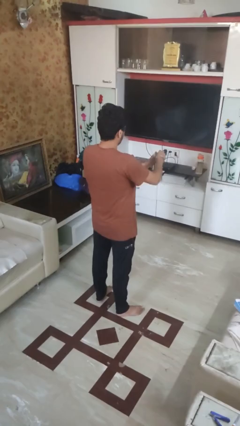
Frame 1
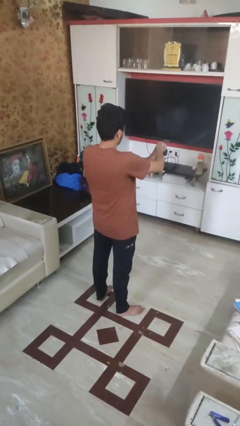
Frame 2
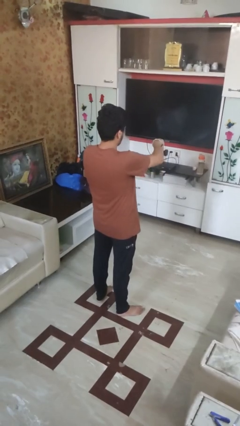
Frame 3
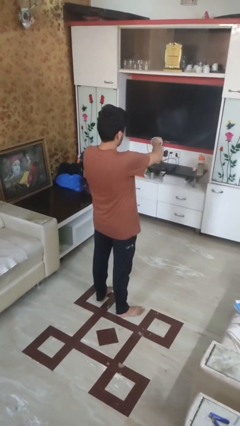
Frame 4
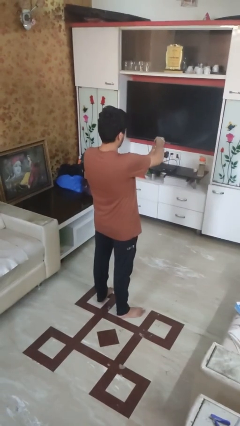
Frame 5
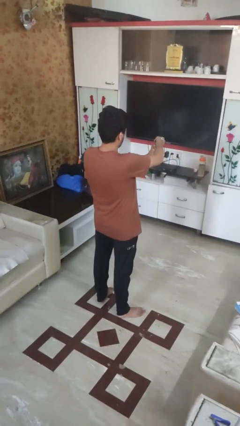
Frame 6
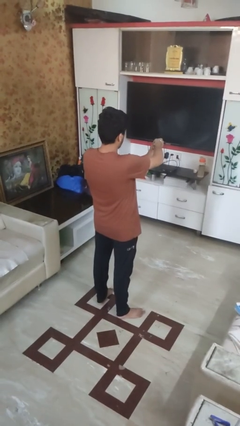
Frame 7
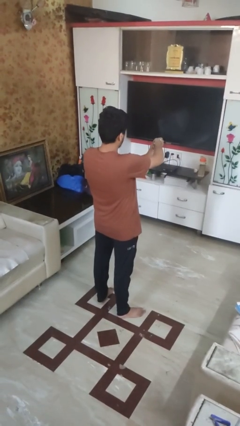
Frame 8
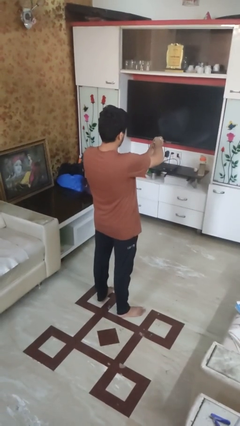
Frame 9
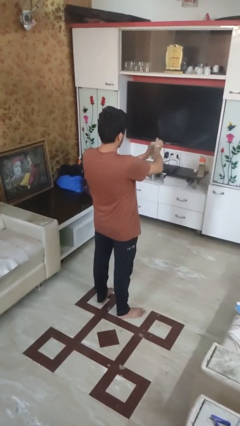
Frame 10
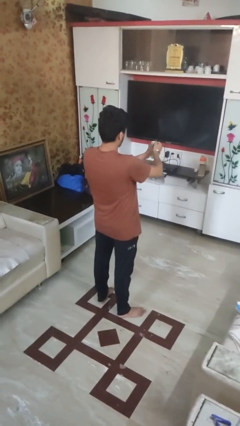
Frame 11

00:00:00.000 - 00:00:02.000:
person opens beverage can

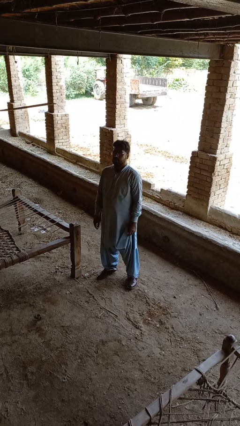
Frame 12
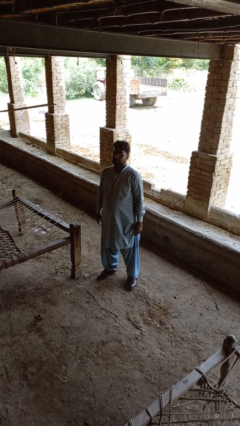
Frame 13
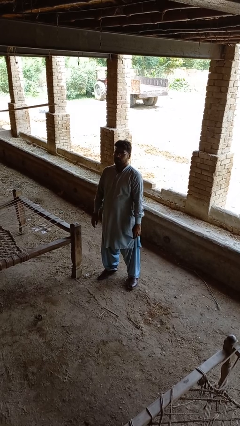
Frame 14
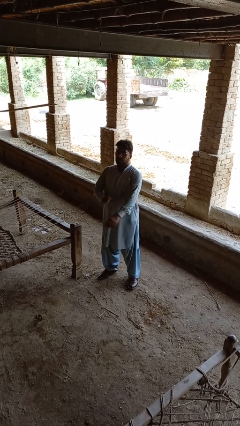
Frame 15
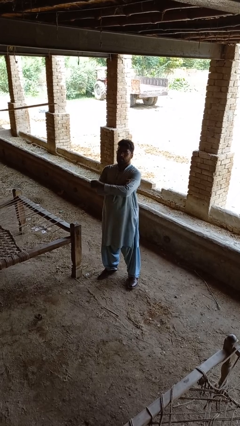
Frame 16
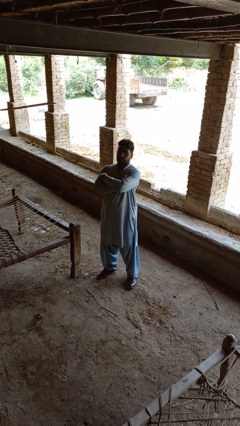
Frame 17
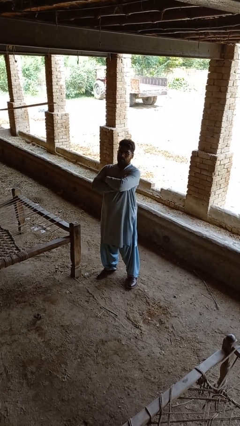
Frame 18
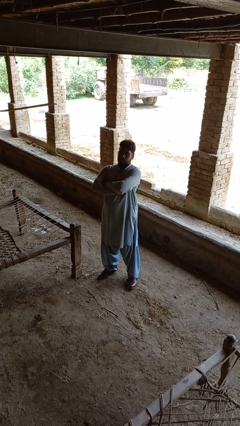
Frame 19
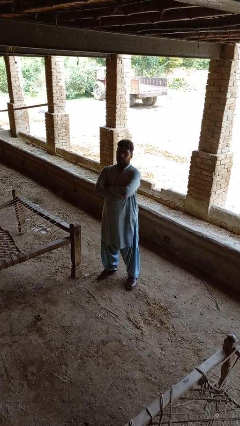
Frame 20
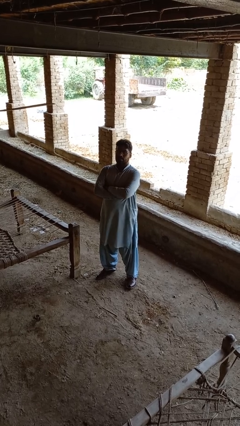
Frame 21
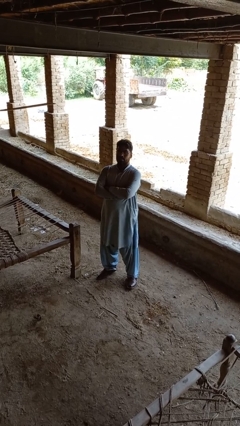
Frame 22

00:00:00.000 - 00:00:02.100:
person crosses arms

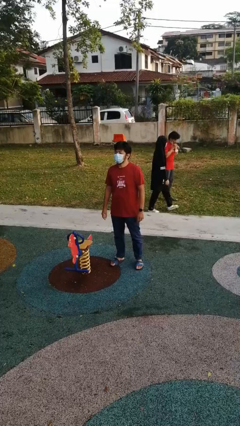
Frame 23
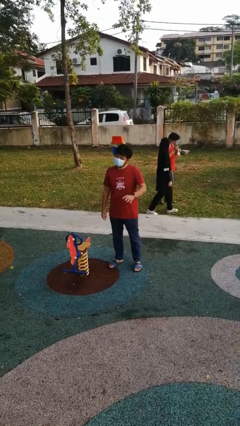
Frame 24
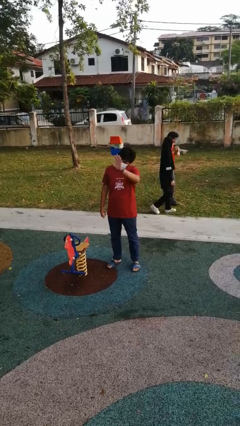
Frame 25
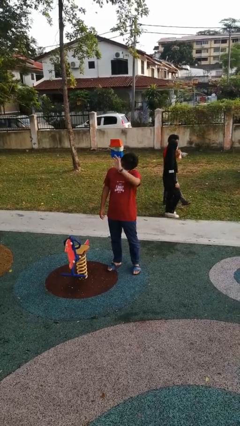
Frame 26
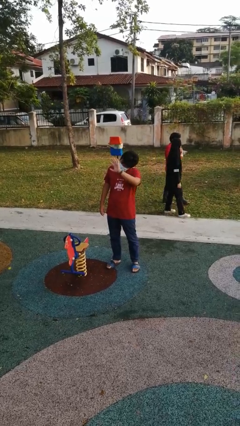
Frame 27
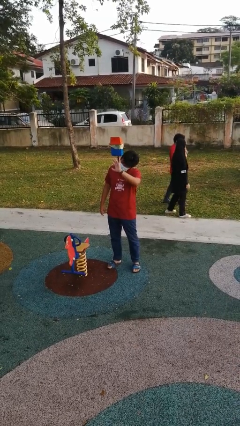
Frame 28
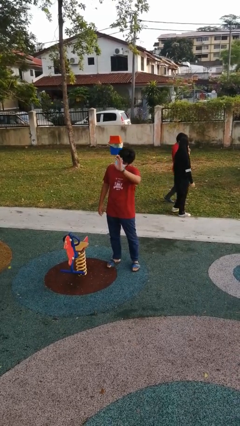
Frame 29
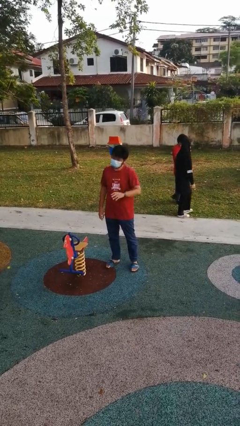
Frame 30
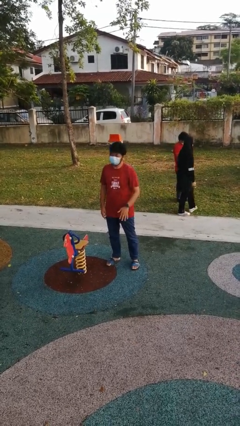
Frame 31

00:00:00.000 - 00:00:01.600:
person waves at person

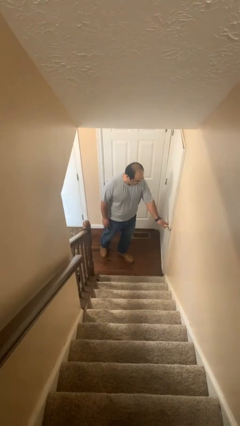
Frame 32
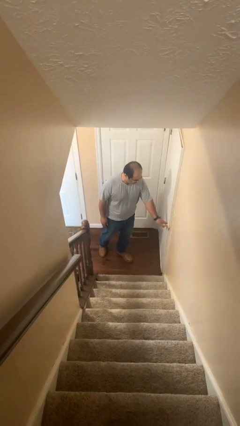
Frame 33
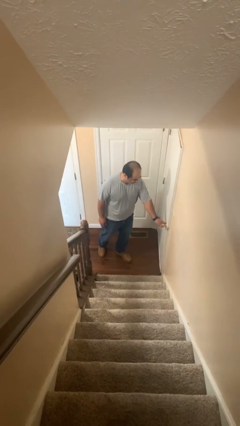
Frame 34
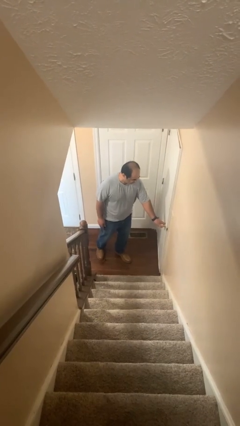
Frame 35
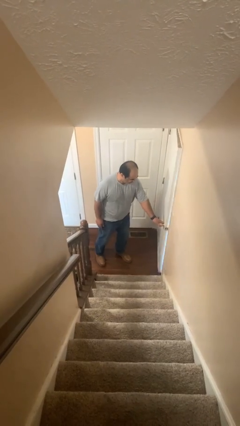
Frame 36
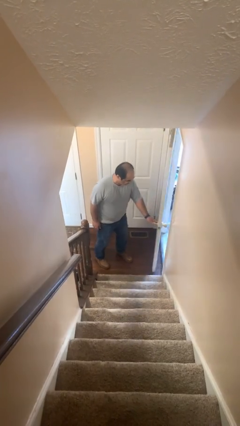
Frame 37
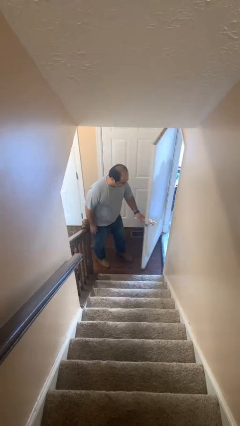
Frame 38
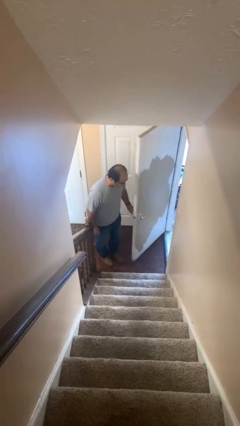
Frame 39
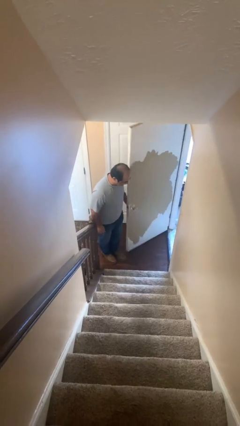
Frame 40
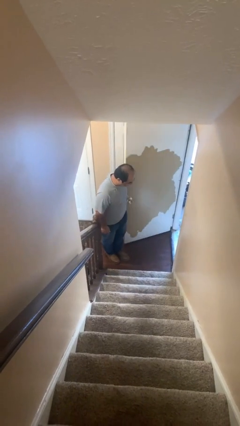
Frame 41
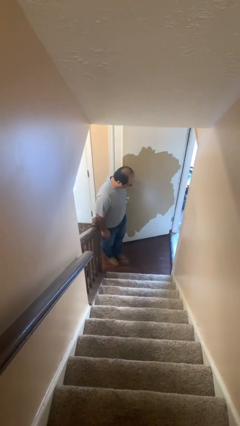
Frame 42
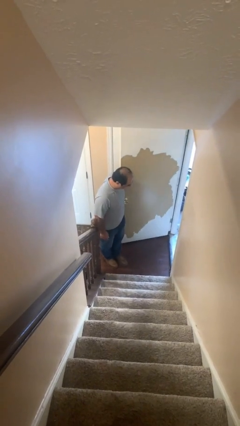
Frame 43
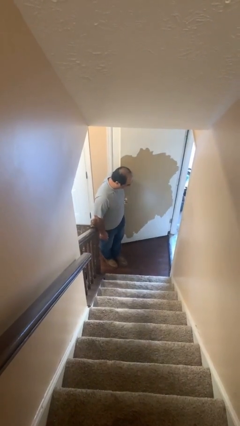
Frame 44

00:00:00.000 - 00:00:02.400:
person opens facility door

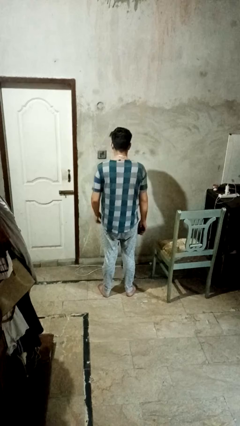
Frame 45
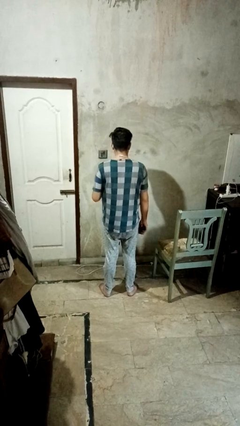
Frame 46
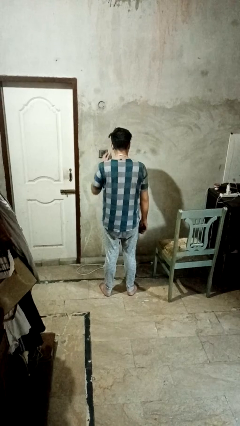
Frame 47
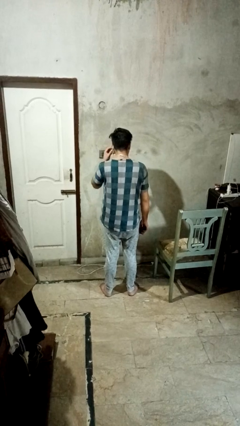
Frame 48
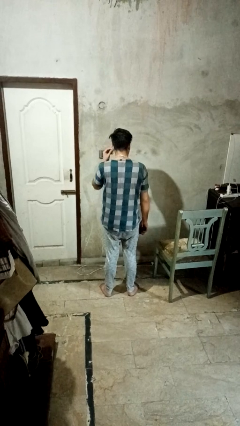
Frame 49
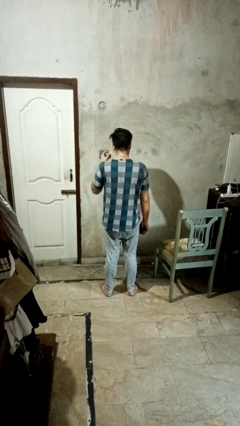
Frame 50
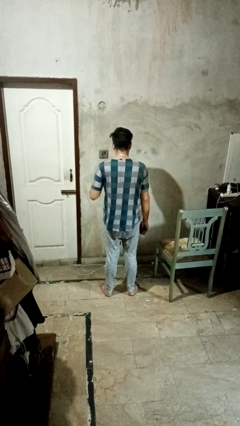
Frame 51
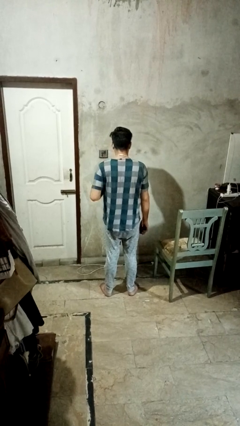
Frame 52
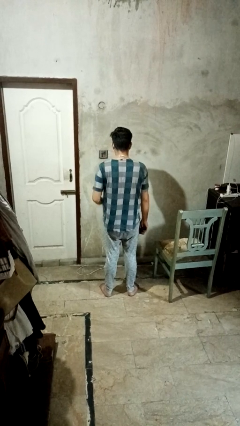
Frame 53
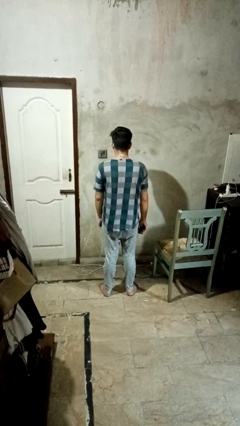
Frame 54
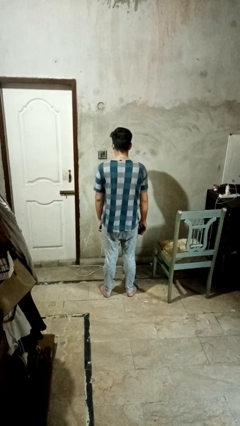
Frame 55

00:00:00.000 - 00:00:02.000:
person takes off headphones

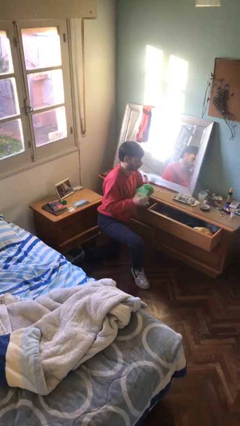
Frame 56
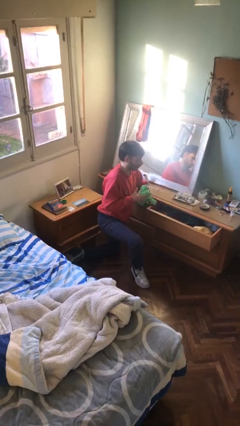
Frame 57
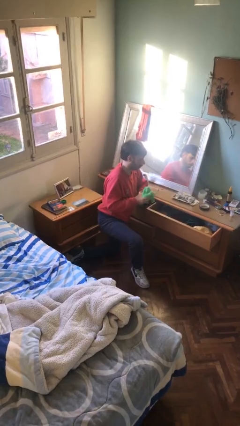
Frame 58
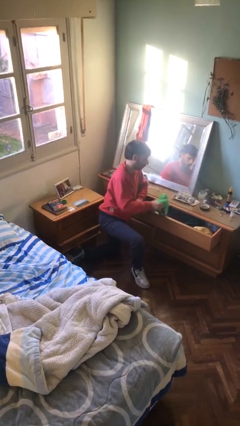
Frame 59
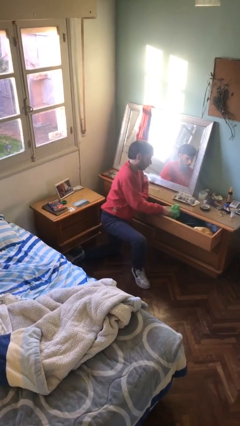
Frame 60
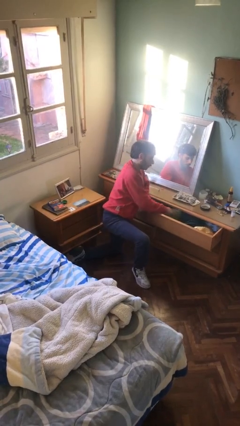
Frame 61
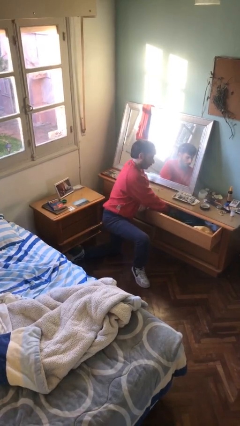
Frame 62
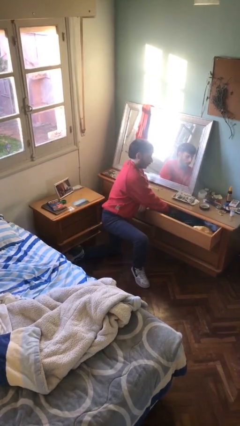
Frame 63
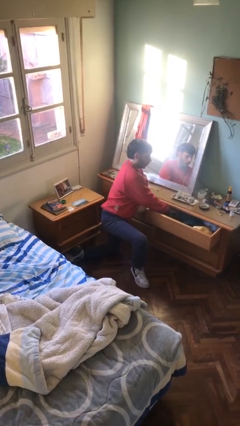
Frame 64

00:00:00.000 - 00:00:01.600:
person puts clothes into dresser

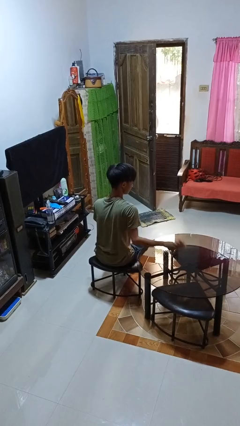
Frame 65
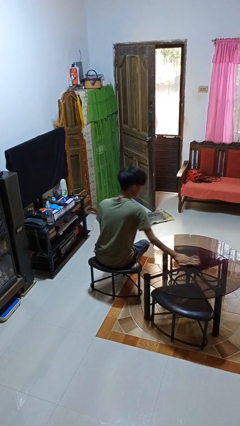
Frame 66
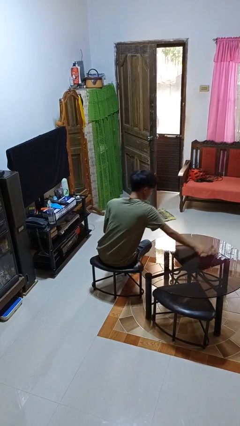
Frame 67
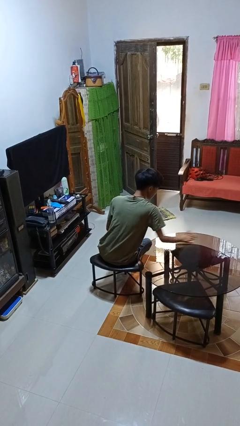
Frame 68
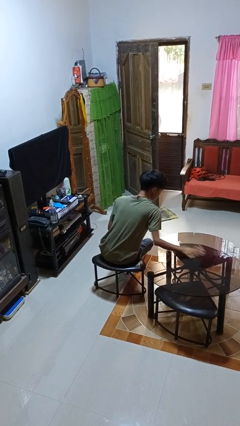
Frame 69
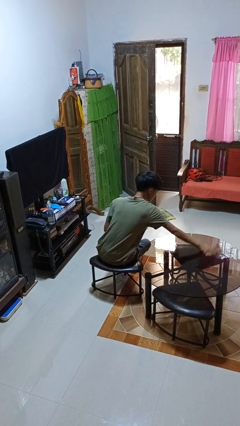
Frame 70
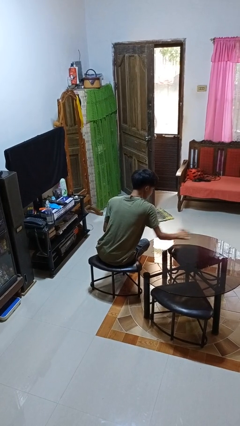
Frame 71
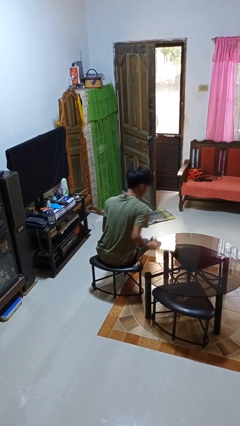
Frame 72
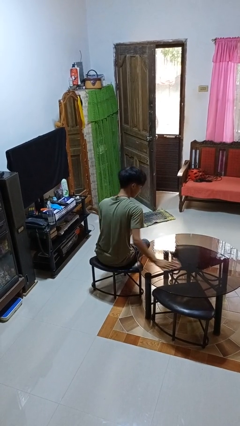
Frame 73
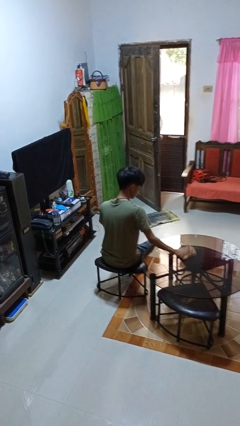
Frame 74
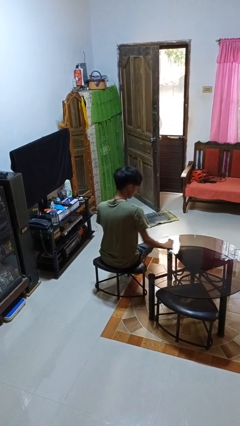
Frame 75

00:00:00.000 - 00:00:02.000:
person cleans table with rag

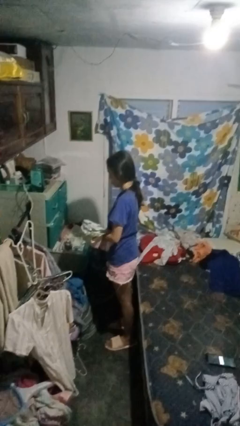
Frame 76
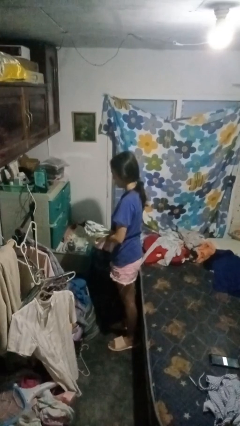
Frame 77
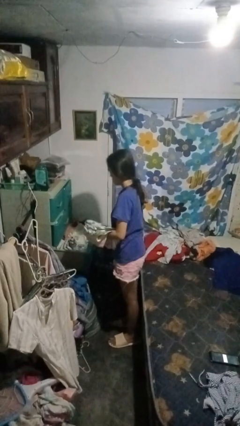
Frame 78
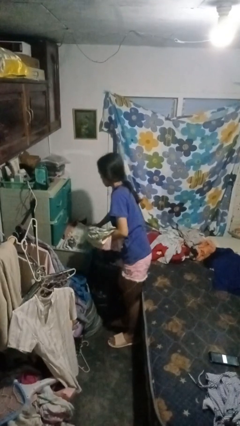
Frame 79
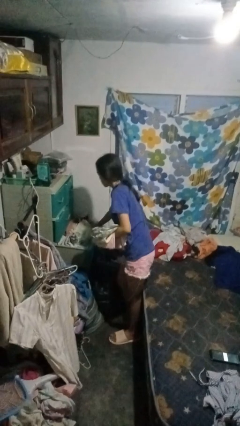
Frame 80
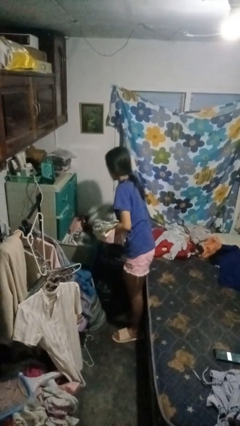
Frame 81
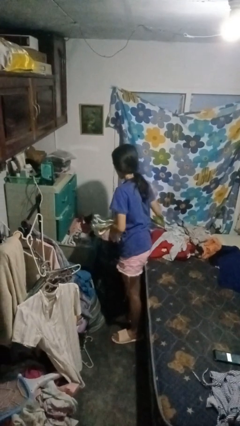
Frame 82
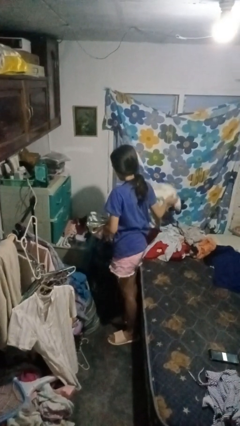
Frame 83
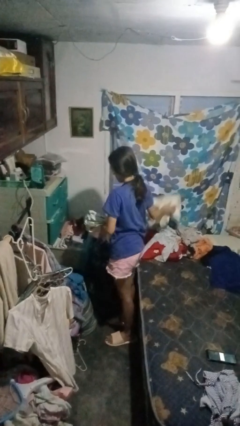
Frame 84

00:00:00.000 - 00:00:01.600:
person takes clothes from dresser

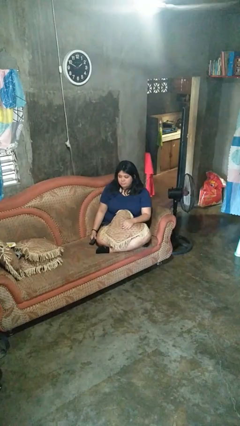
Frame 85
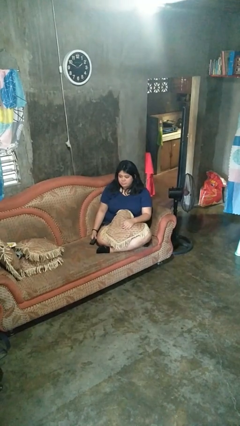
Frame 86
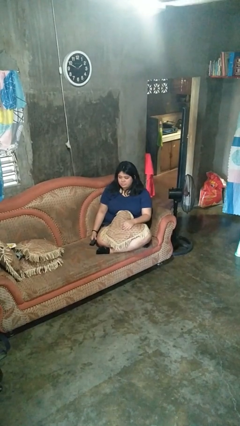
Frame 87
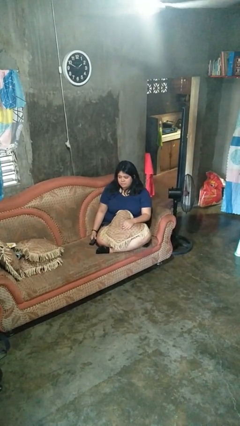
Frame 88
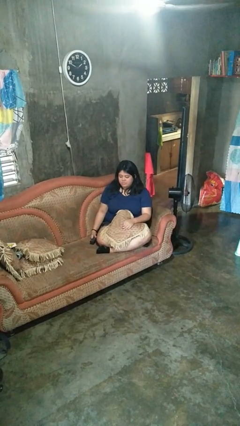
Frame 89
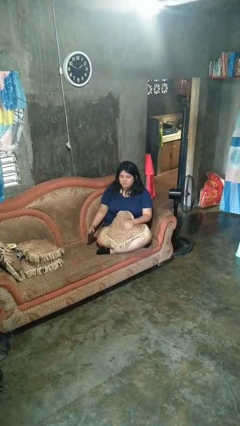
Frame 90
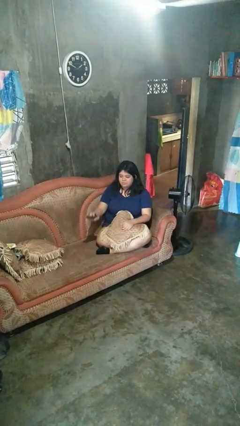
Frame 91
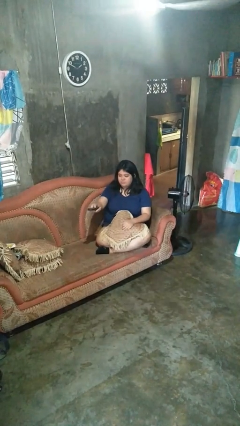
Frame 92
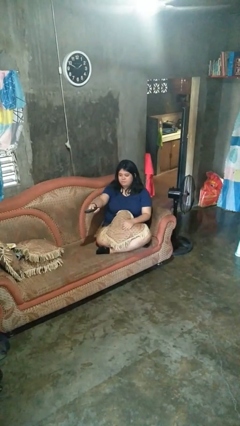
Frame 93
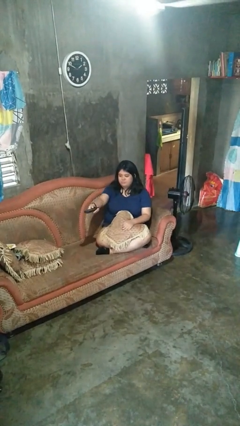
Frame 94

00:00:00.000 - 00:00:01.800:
person uses television remote

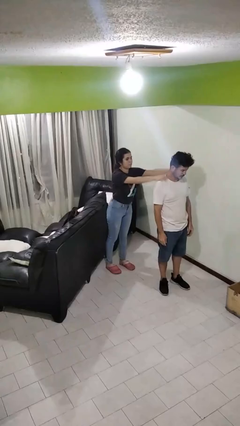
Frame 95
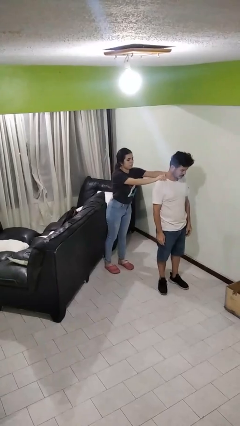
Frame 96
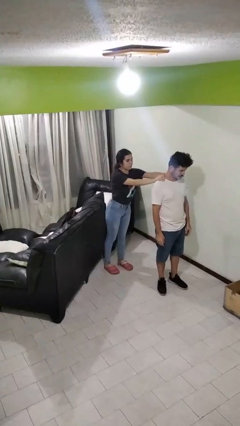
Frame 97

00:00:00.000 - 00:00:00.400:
person grabs person by shoulder
